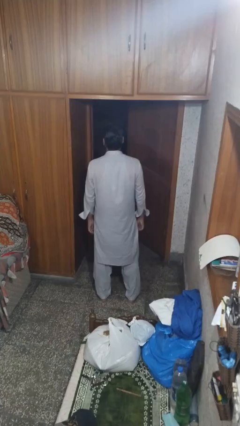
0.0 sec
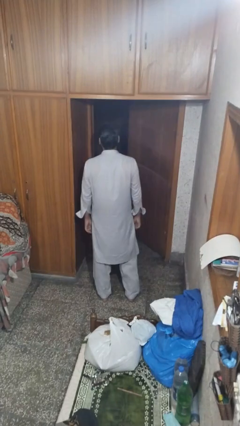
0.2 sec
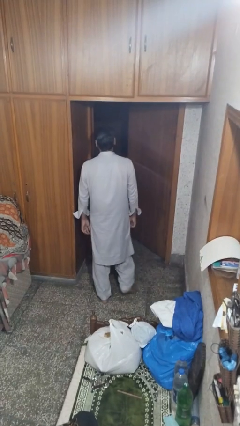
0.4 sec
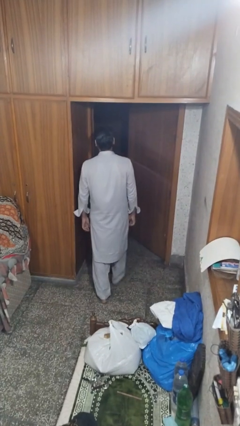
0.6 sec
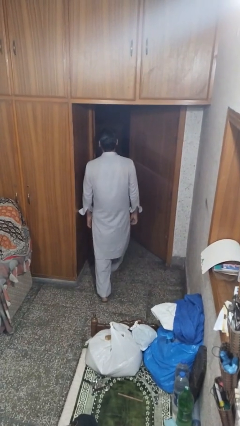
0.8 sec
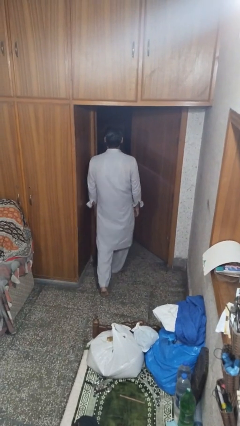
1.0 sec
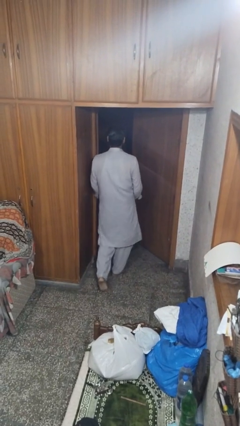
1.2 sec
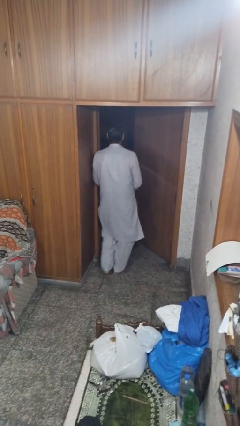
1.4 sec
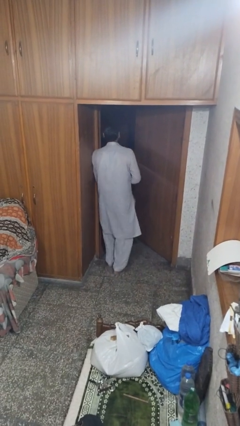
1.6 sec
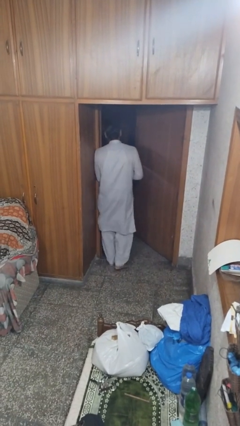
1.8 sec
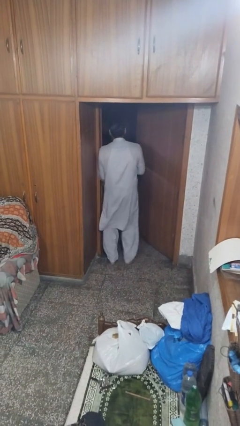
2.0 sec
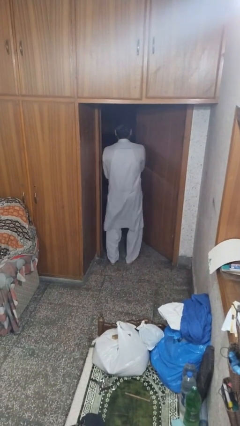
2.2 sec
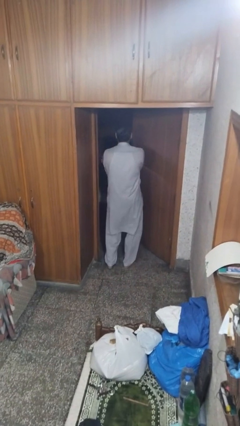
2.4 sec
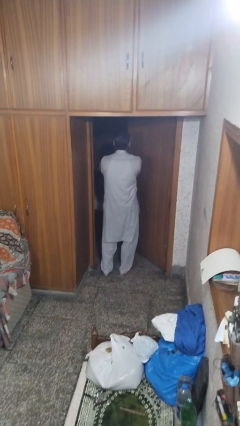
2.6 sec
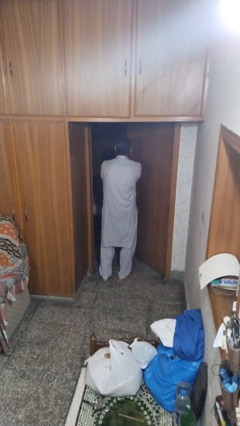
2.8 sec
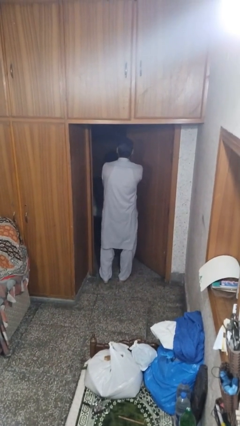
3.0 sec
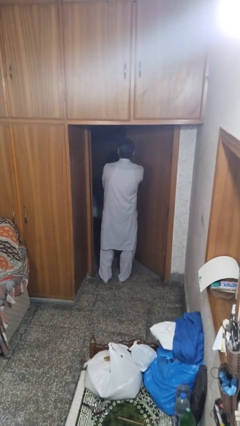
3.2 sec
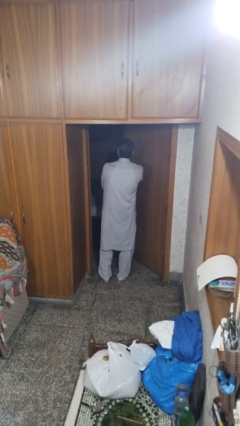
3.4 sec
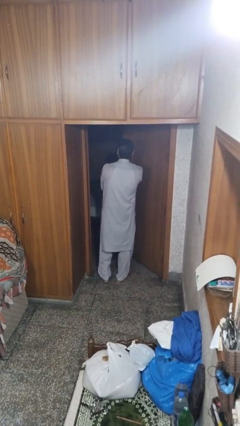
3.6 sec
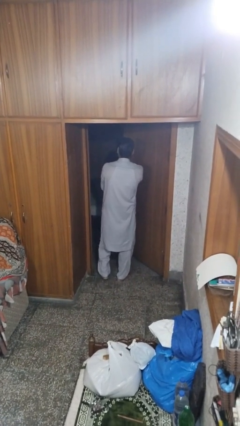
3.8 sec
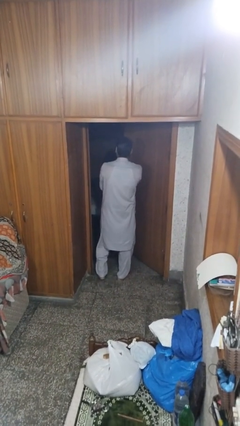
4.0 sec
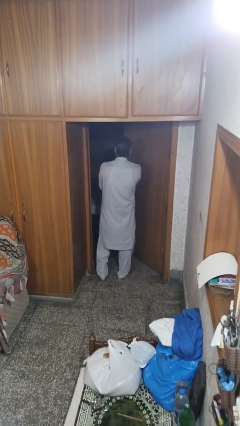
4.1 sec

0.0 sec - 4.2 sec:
person bumps into wall

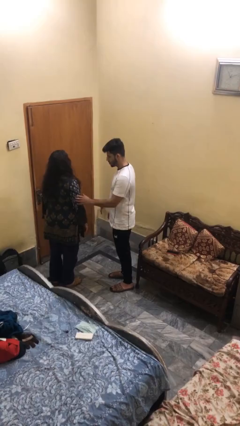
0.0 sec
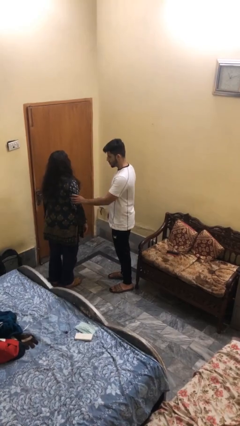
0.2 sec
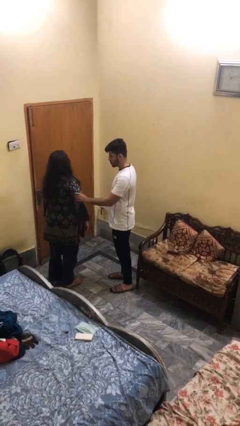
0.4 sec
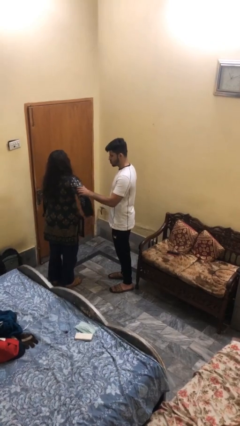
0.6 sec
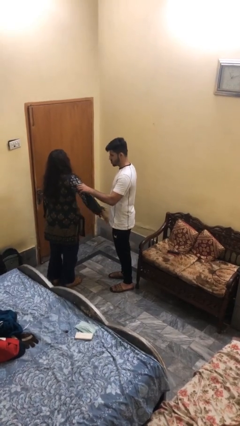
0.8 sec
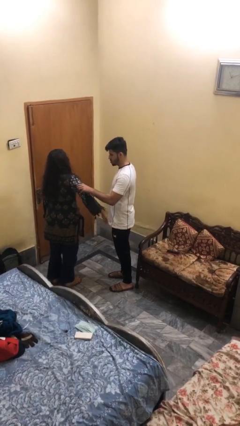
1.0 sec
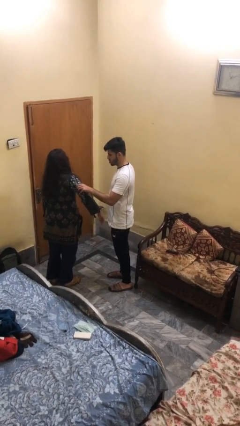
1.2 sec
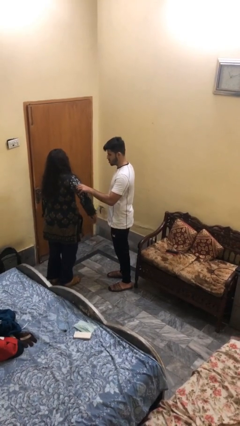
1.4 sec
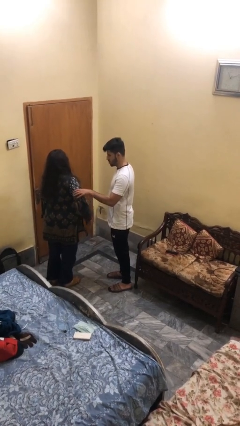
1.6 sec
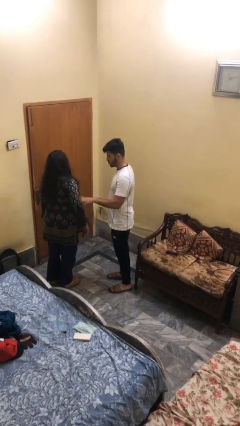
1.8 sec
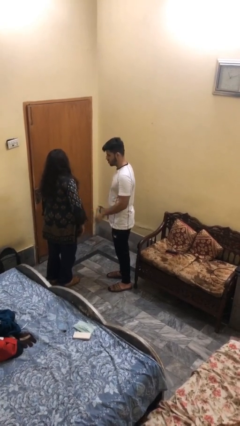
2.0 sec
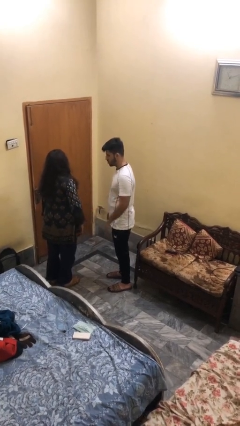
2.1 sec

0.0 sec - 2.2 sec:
person grabs person by bicep

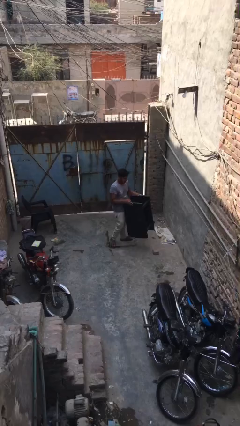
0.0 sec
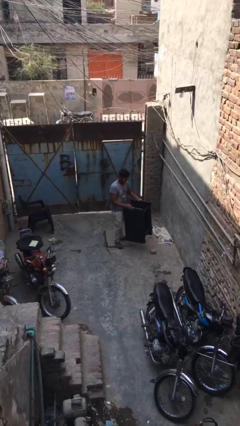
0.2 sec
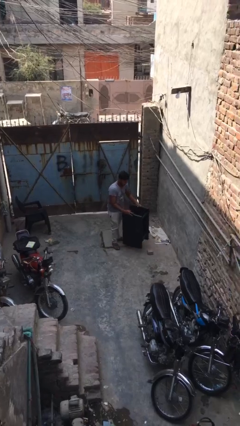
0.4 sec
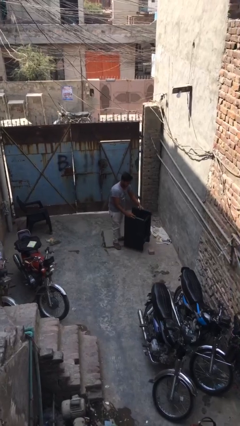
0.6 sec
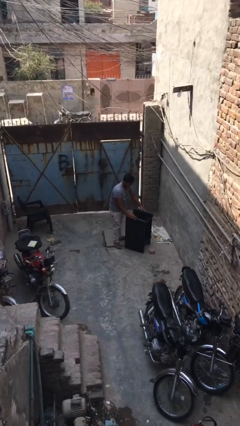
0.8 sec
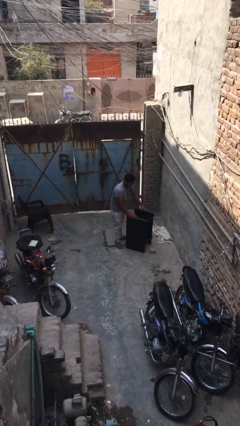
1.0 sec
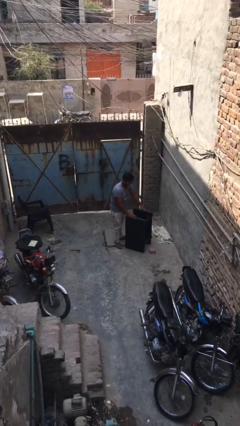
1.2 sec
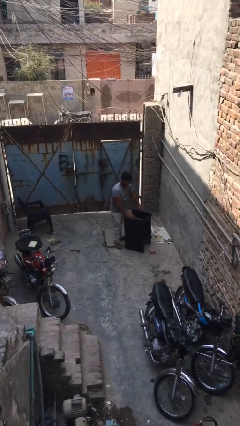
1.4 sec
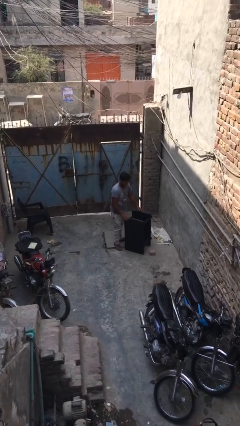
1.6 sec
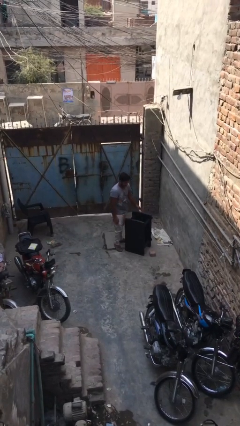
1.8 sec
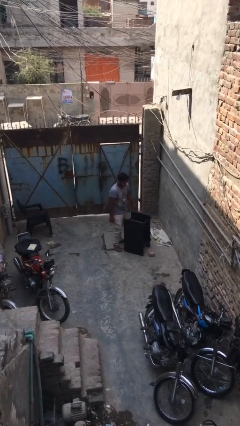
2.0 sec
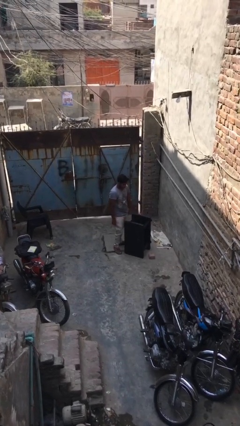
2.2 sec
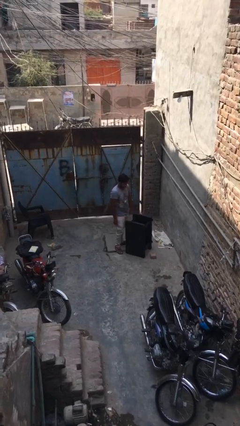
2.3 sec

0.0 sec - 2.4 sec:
person puts down object on floor

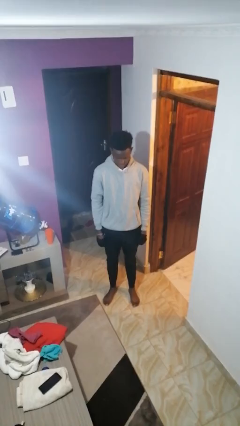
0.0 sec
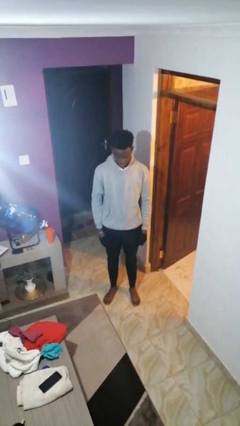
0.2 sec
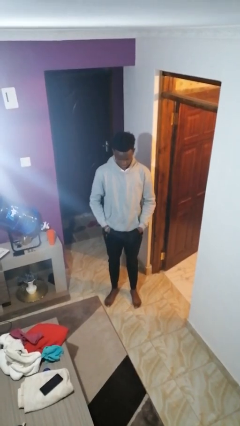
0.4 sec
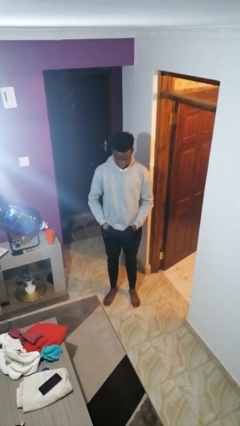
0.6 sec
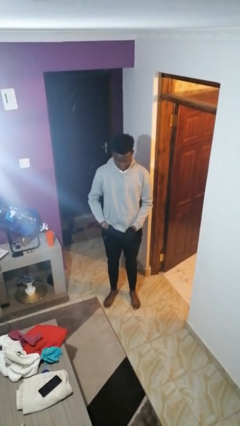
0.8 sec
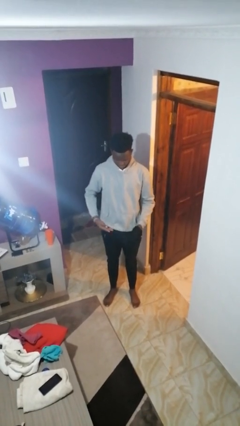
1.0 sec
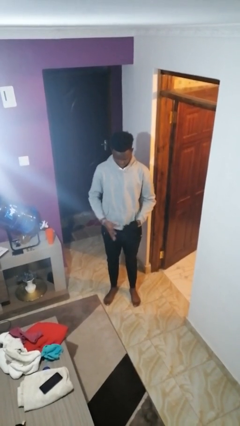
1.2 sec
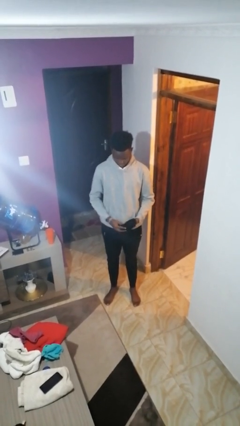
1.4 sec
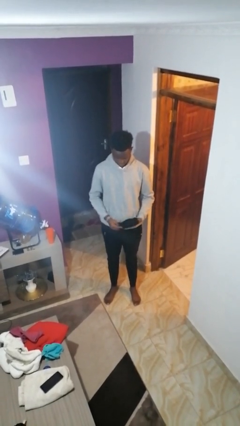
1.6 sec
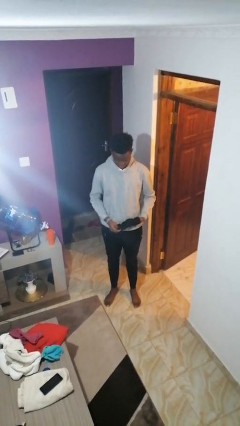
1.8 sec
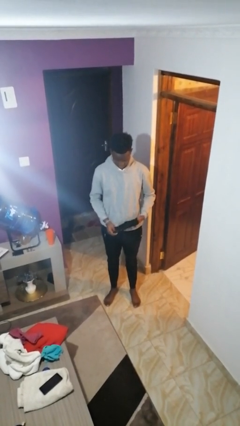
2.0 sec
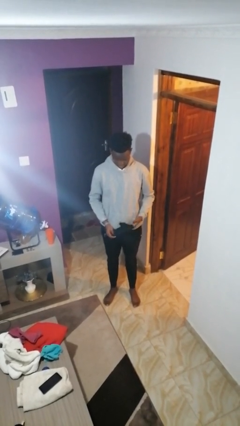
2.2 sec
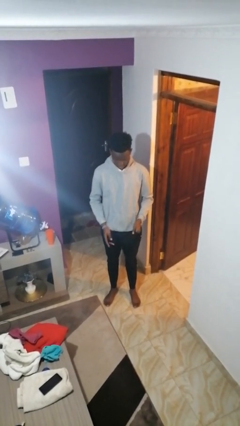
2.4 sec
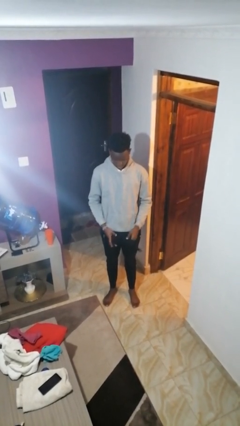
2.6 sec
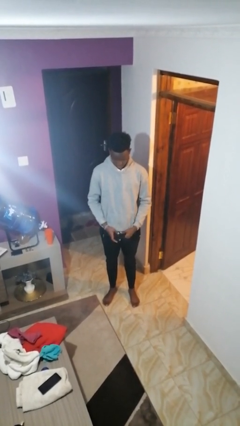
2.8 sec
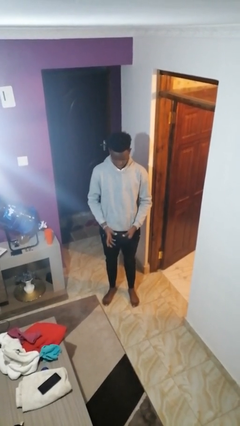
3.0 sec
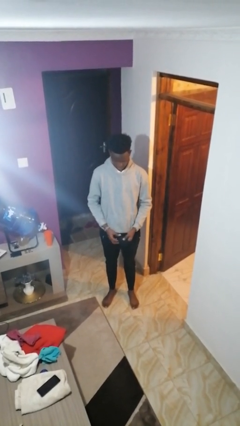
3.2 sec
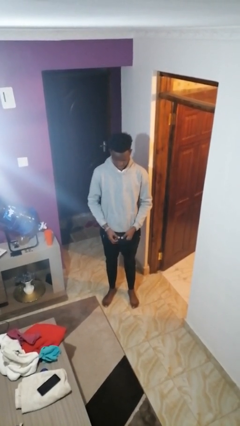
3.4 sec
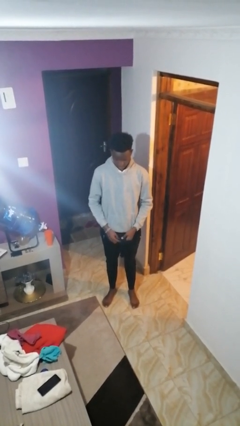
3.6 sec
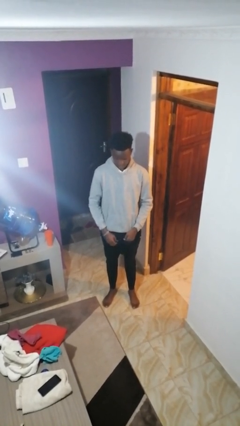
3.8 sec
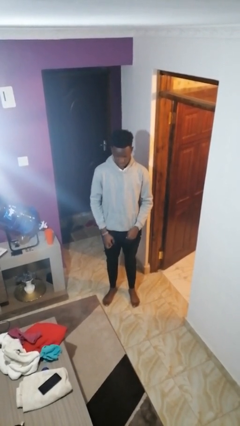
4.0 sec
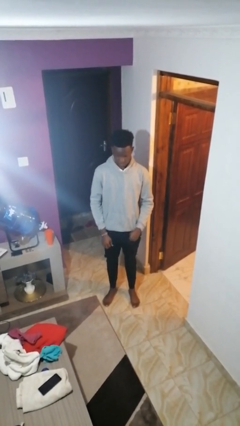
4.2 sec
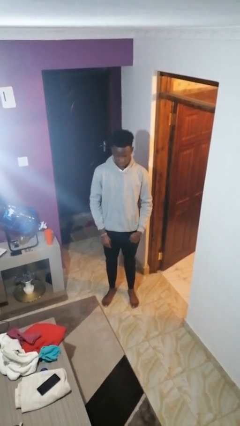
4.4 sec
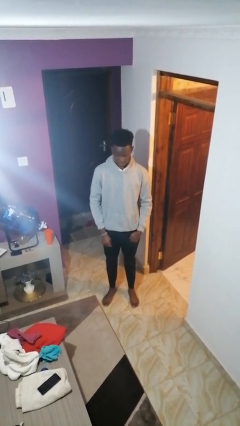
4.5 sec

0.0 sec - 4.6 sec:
person takes off gloves

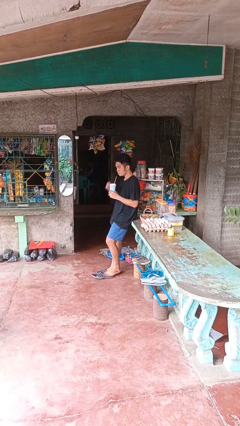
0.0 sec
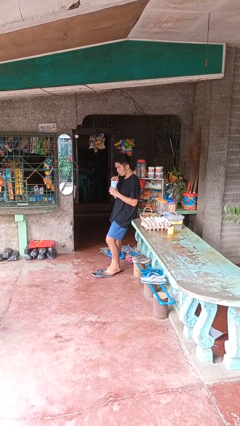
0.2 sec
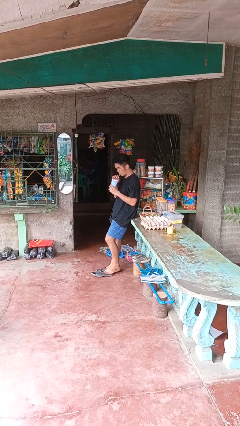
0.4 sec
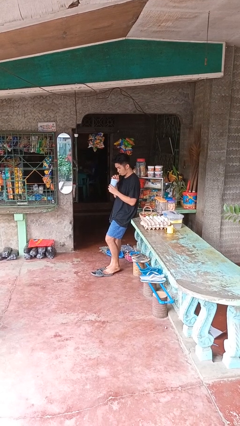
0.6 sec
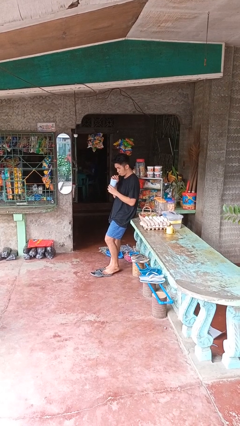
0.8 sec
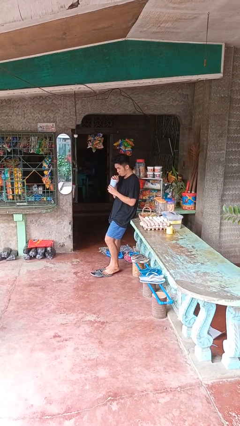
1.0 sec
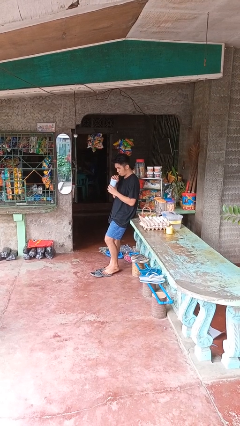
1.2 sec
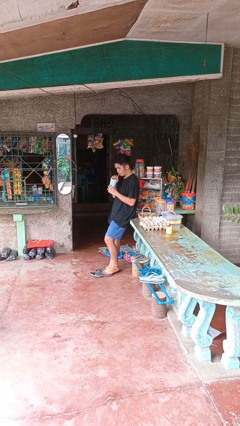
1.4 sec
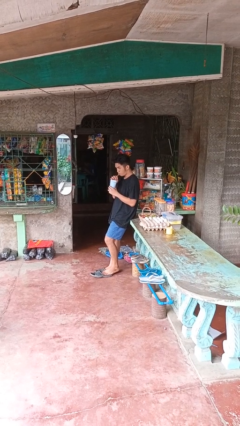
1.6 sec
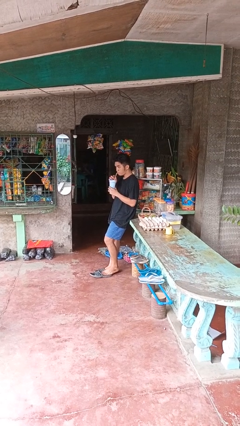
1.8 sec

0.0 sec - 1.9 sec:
person drinks from straw

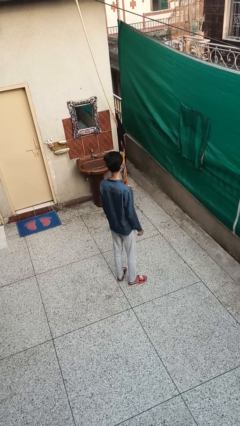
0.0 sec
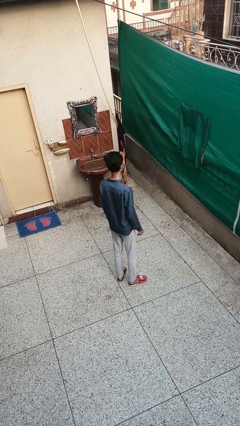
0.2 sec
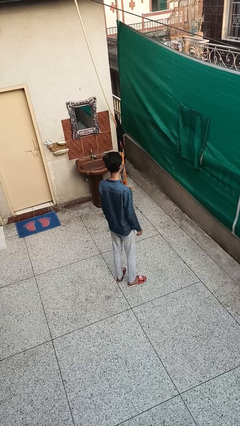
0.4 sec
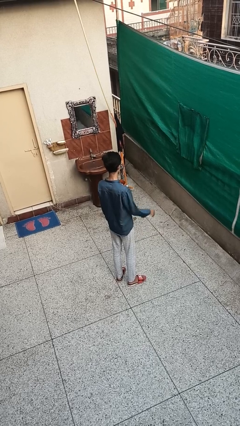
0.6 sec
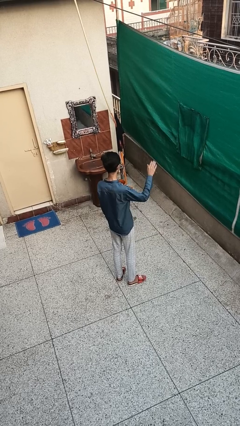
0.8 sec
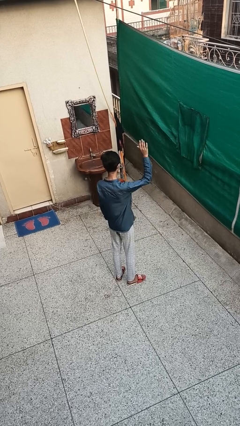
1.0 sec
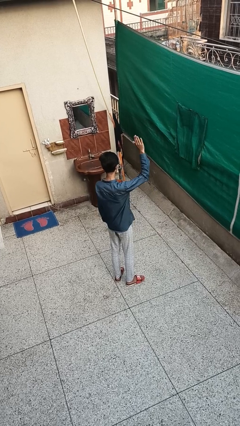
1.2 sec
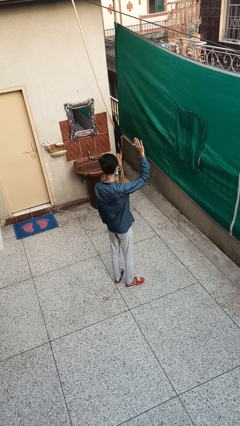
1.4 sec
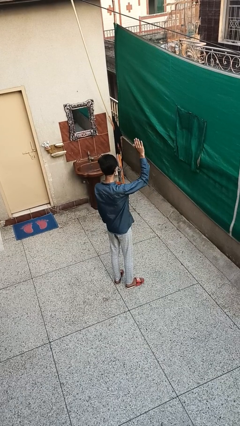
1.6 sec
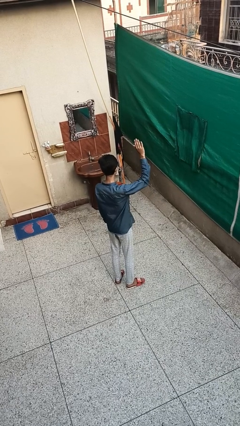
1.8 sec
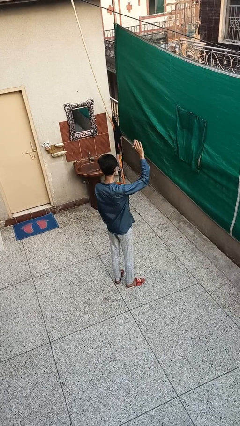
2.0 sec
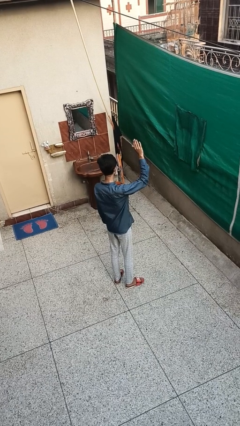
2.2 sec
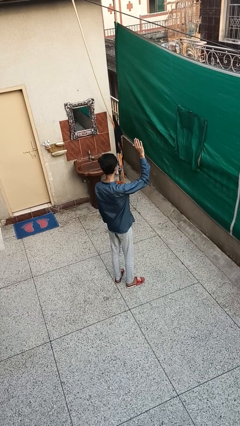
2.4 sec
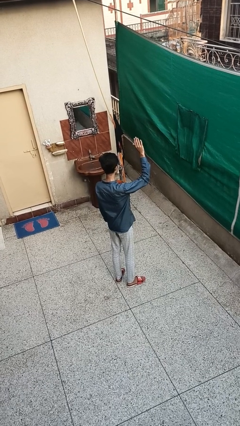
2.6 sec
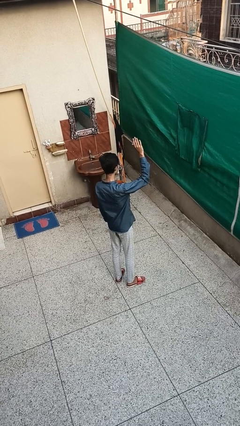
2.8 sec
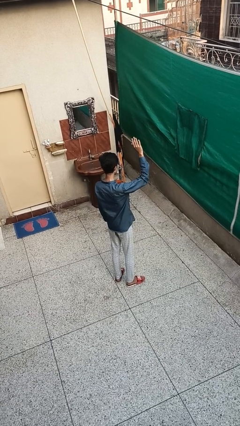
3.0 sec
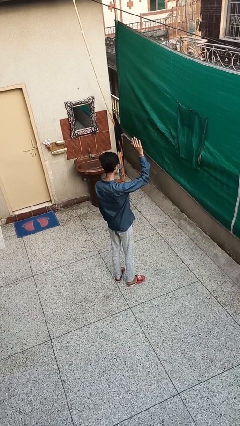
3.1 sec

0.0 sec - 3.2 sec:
person gestures raise hand
